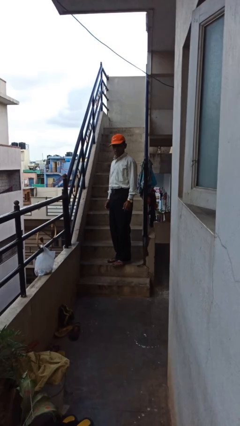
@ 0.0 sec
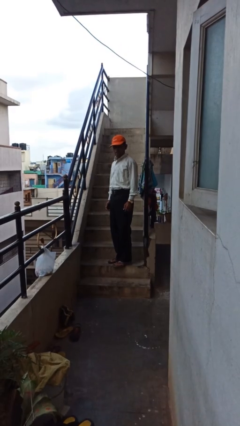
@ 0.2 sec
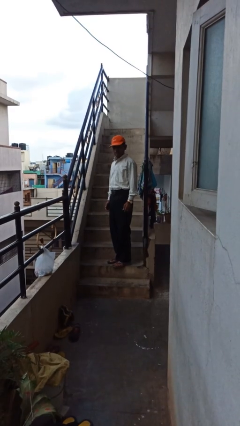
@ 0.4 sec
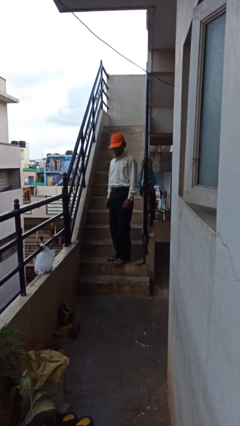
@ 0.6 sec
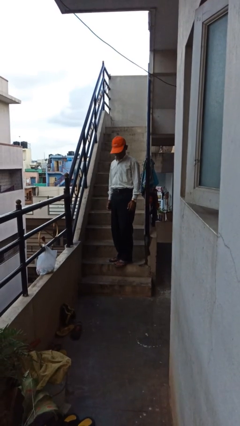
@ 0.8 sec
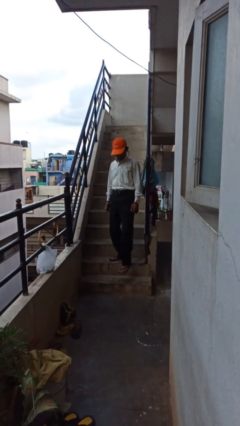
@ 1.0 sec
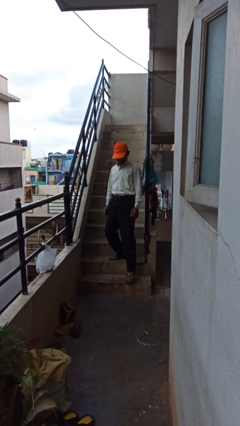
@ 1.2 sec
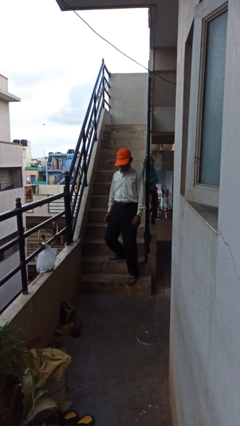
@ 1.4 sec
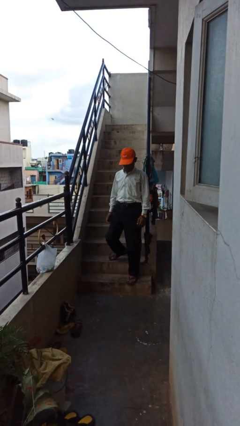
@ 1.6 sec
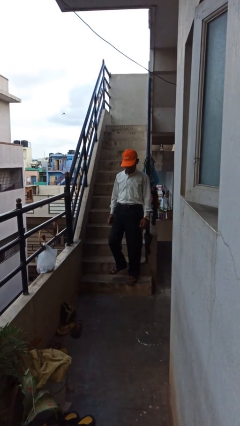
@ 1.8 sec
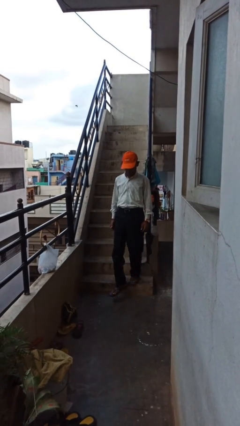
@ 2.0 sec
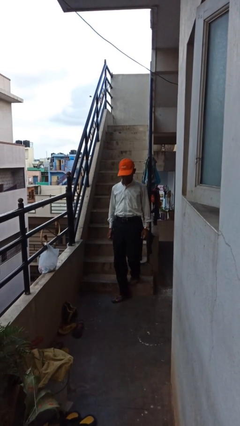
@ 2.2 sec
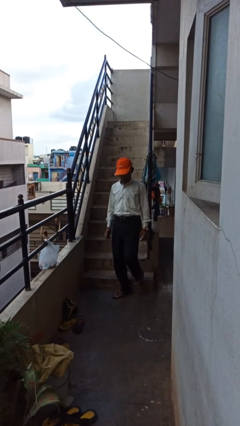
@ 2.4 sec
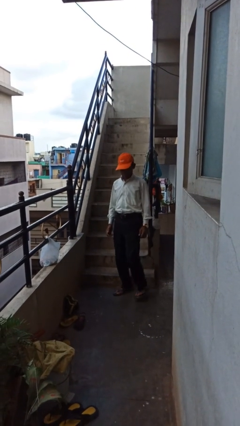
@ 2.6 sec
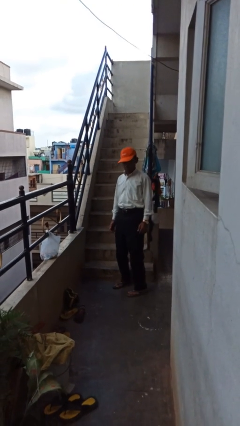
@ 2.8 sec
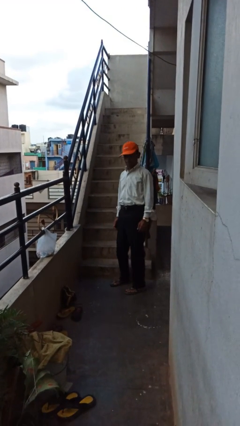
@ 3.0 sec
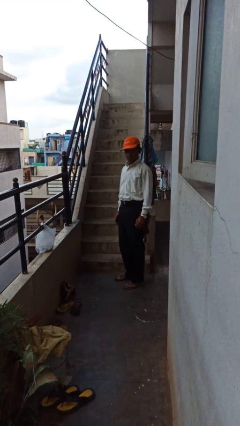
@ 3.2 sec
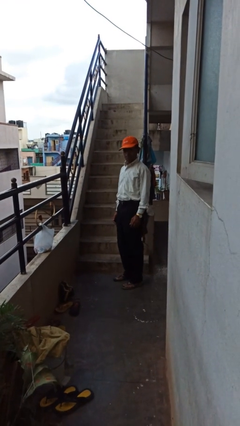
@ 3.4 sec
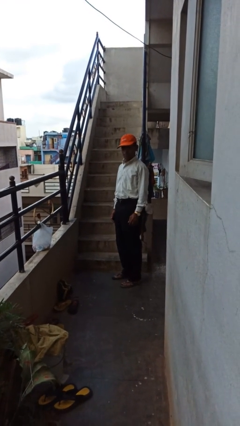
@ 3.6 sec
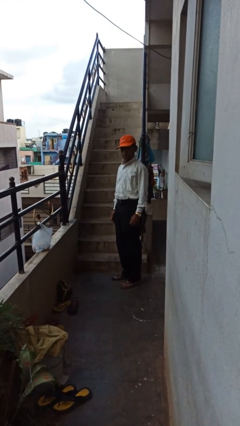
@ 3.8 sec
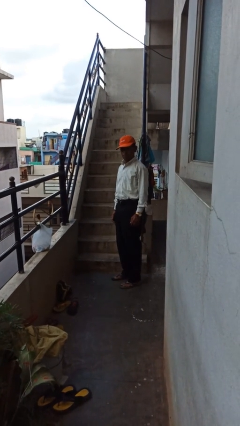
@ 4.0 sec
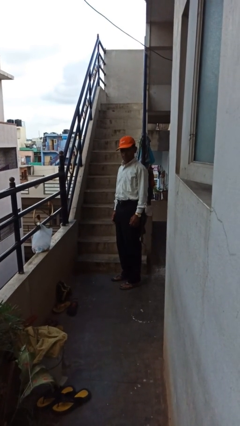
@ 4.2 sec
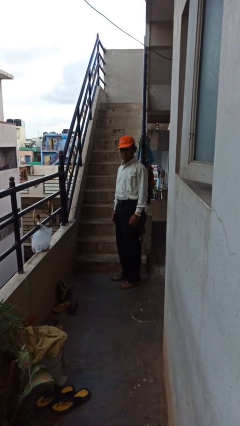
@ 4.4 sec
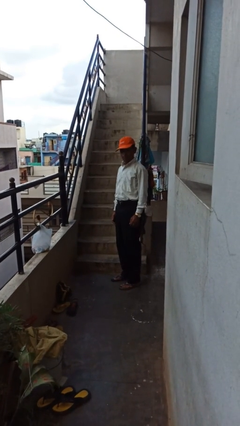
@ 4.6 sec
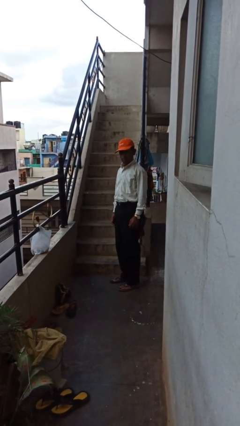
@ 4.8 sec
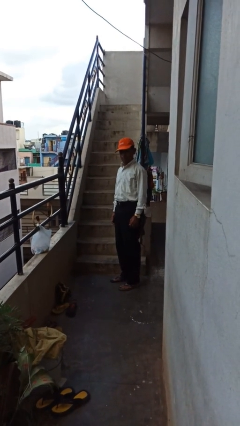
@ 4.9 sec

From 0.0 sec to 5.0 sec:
person climbs down stairs

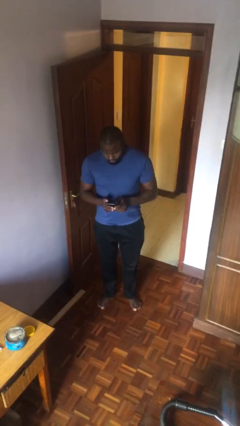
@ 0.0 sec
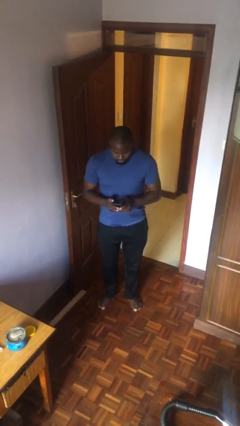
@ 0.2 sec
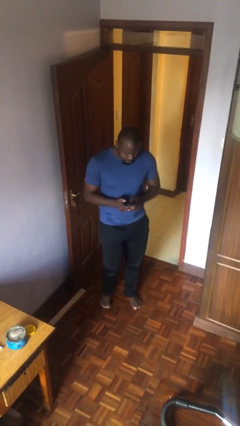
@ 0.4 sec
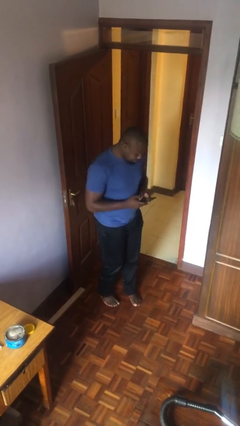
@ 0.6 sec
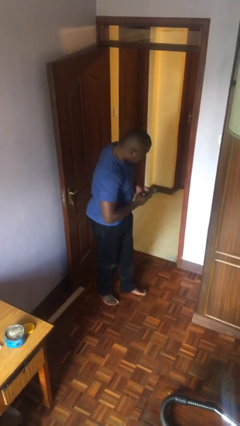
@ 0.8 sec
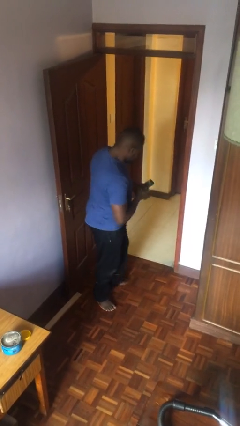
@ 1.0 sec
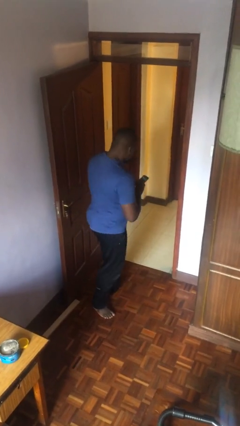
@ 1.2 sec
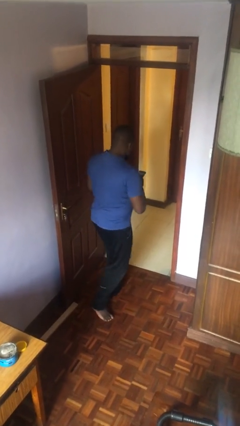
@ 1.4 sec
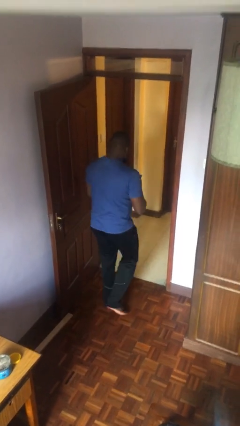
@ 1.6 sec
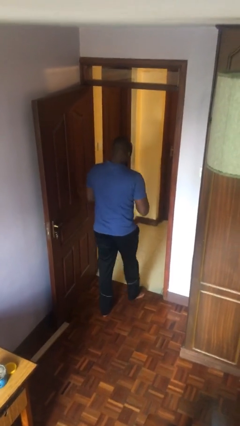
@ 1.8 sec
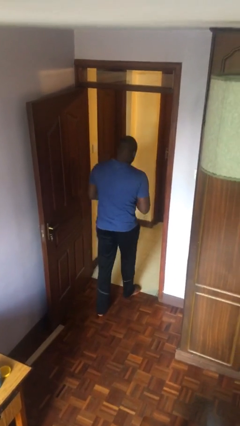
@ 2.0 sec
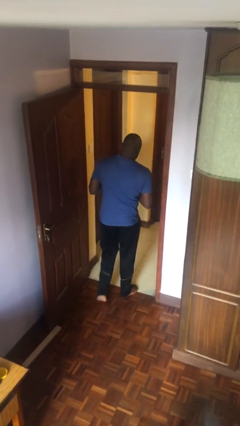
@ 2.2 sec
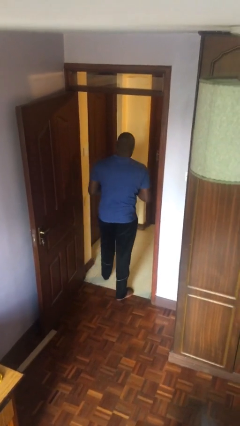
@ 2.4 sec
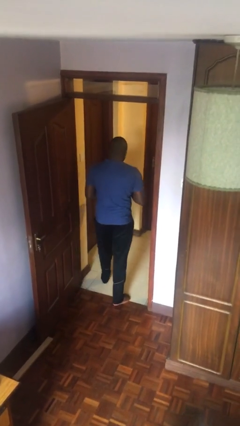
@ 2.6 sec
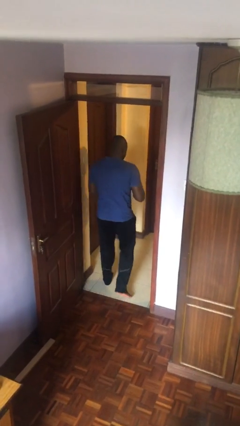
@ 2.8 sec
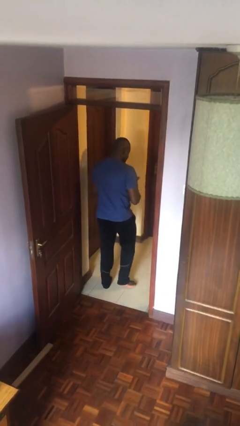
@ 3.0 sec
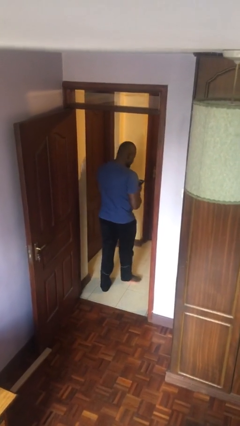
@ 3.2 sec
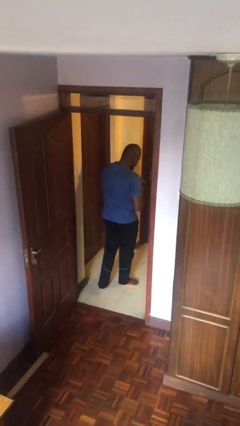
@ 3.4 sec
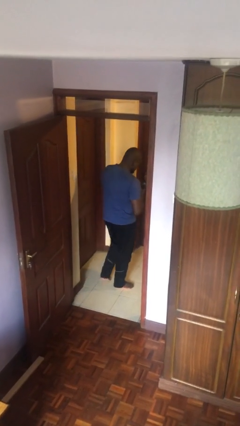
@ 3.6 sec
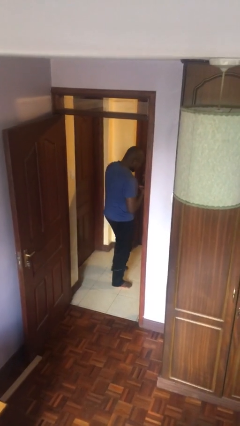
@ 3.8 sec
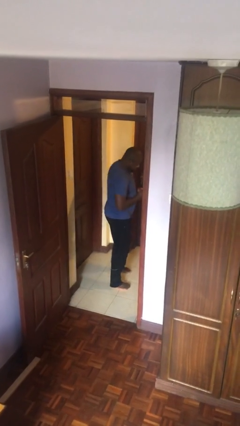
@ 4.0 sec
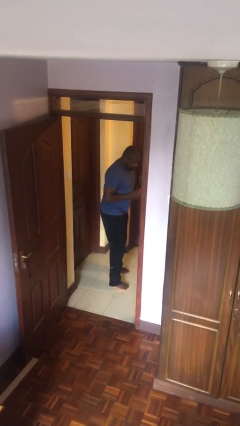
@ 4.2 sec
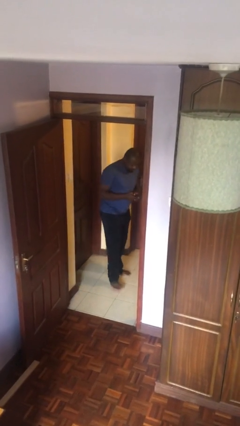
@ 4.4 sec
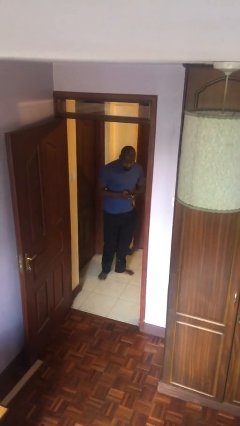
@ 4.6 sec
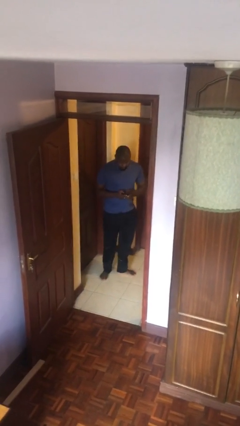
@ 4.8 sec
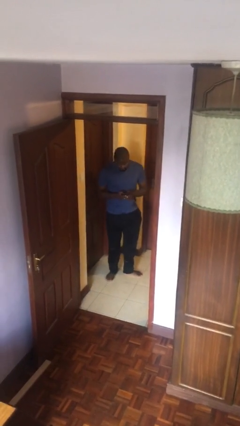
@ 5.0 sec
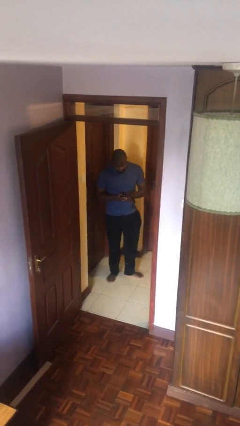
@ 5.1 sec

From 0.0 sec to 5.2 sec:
person exits scene through structure

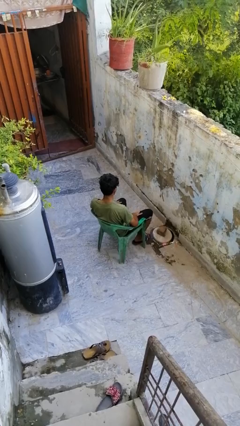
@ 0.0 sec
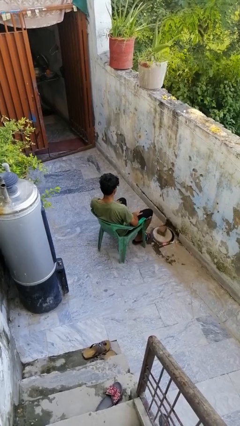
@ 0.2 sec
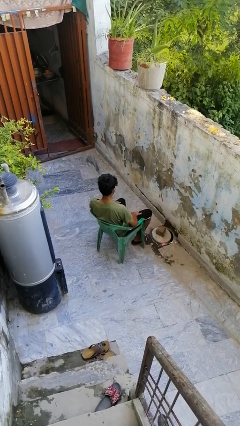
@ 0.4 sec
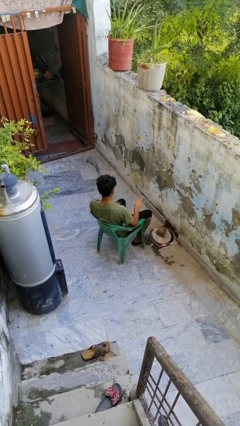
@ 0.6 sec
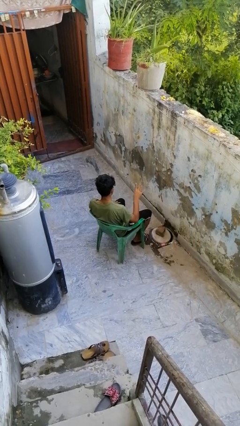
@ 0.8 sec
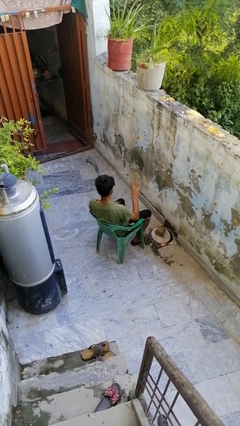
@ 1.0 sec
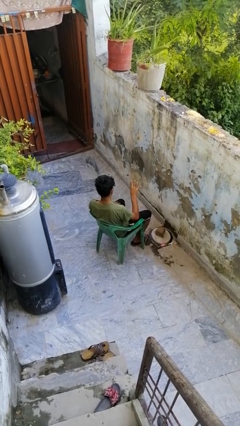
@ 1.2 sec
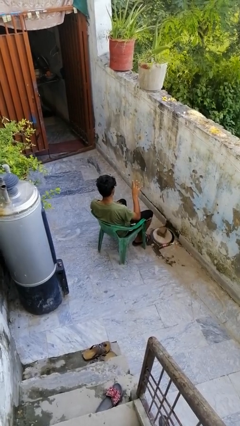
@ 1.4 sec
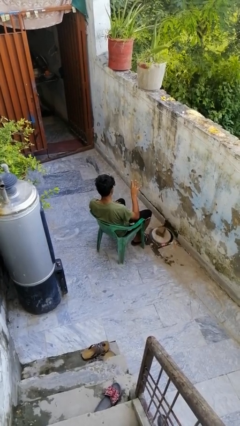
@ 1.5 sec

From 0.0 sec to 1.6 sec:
person gestures number four

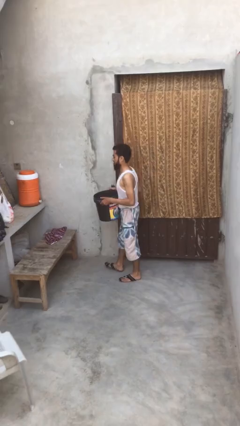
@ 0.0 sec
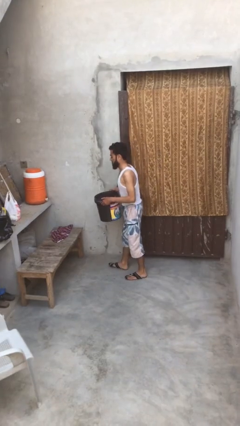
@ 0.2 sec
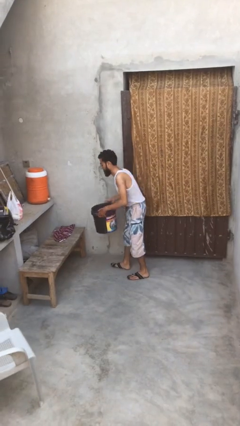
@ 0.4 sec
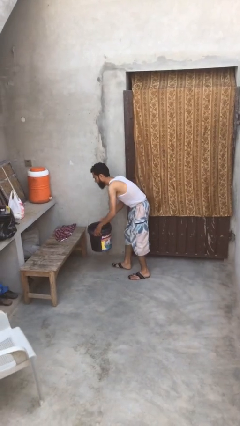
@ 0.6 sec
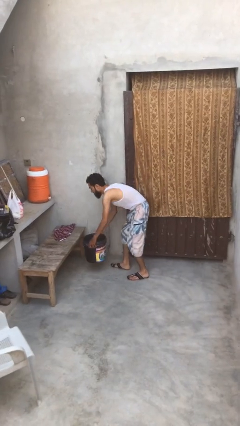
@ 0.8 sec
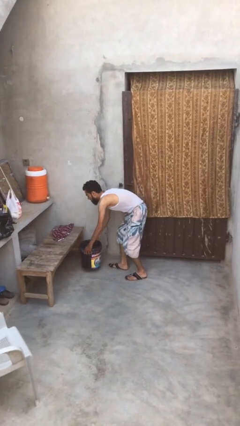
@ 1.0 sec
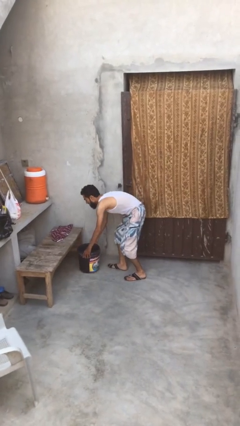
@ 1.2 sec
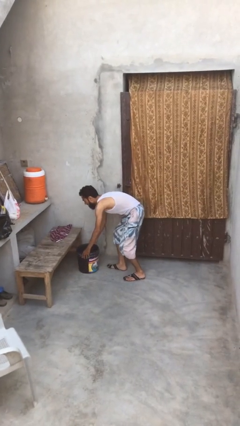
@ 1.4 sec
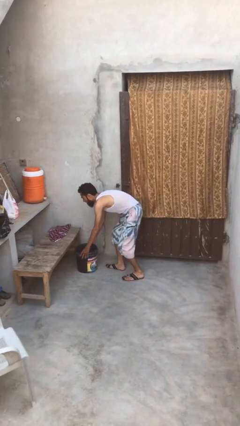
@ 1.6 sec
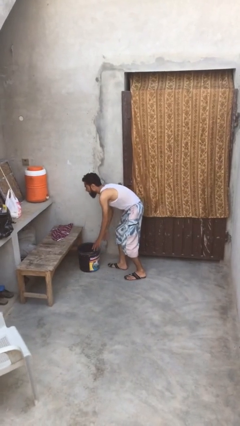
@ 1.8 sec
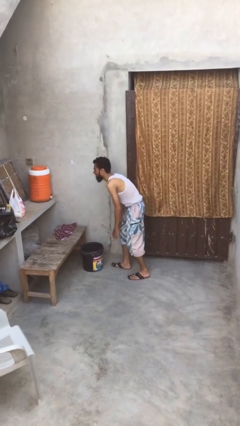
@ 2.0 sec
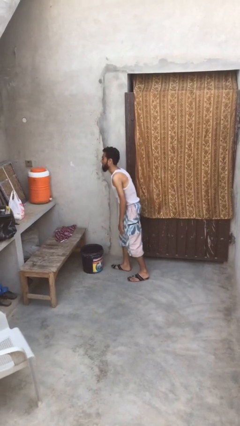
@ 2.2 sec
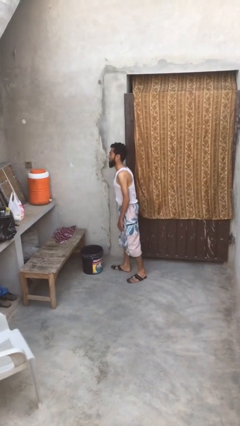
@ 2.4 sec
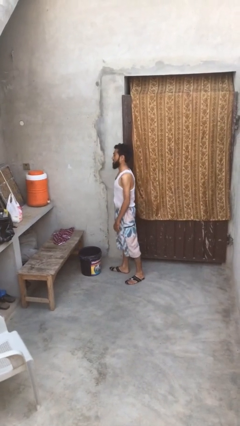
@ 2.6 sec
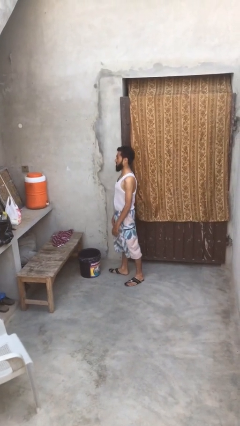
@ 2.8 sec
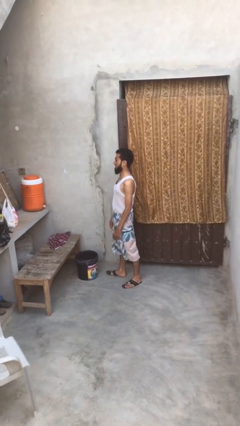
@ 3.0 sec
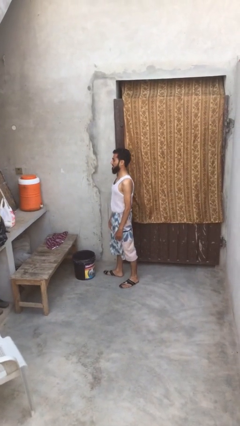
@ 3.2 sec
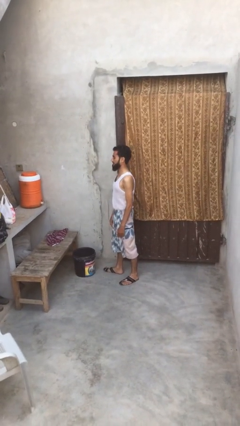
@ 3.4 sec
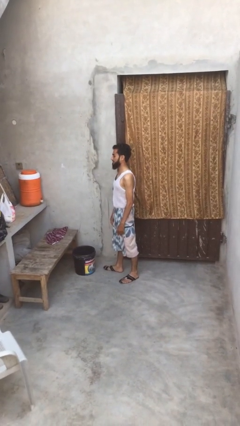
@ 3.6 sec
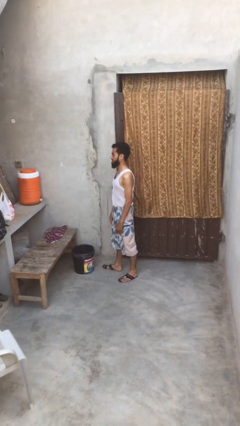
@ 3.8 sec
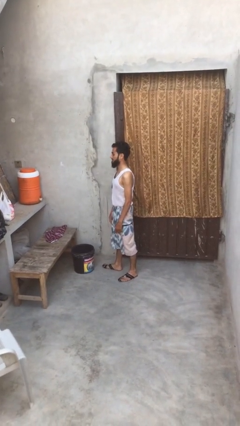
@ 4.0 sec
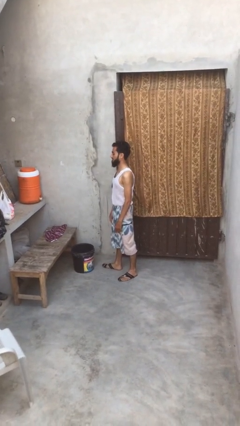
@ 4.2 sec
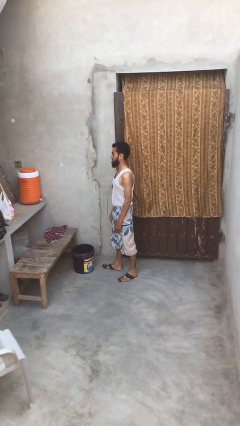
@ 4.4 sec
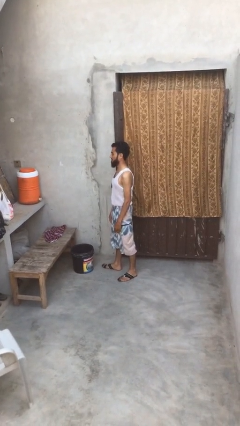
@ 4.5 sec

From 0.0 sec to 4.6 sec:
person puts down object on floor

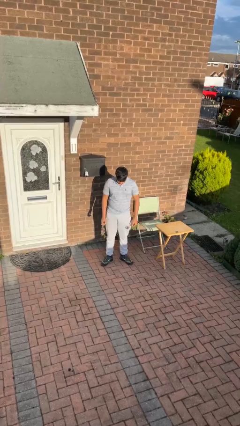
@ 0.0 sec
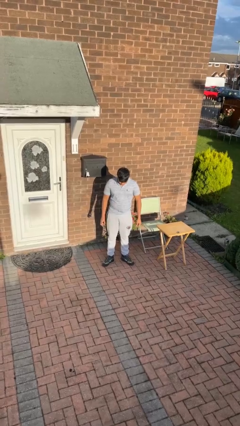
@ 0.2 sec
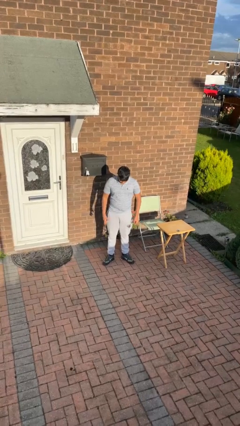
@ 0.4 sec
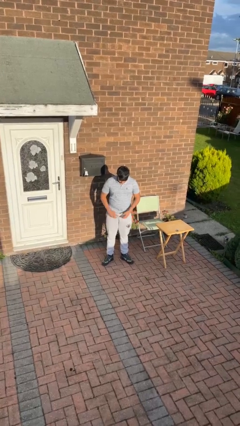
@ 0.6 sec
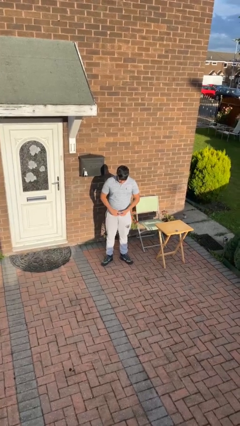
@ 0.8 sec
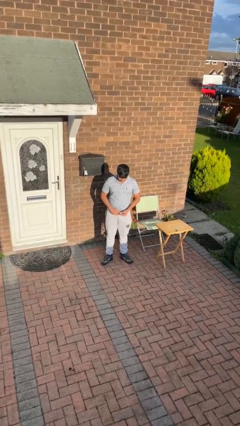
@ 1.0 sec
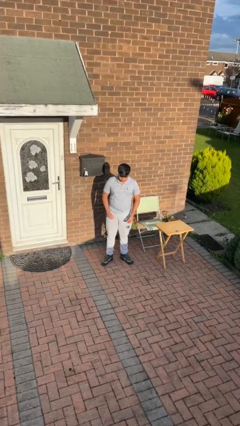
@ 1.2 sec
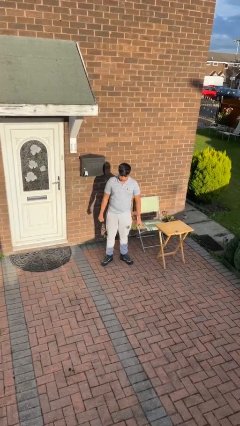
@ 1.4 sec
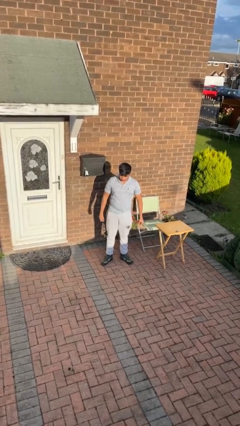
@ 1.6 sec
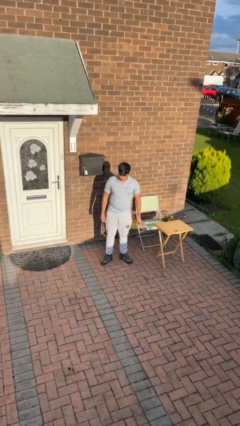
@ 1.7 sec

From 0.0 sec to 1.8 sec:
person takes off ring
